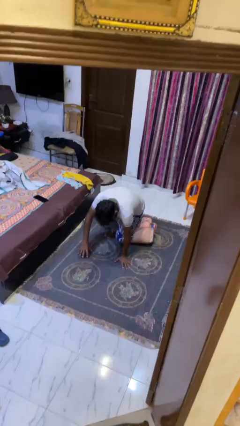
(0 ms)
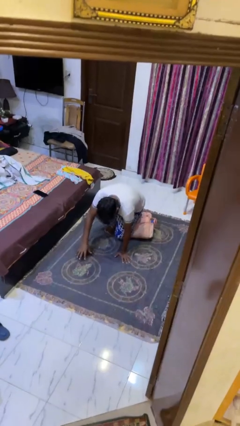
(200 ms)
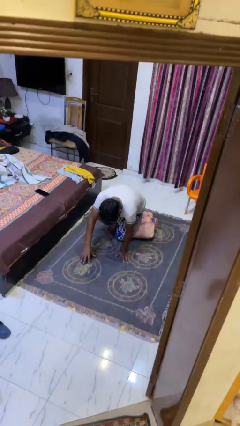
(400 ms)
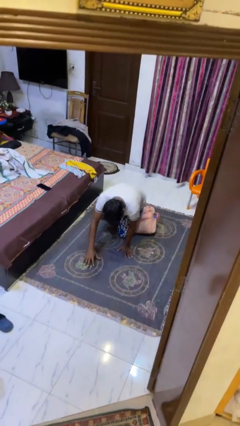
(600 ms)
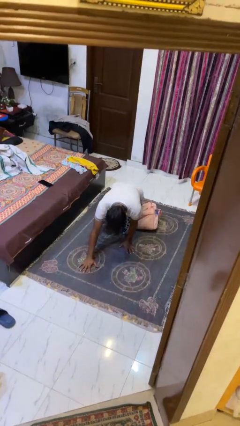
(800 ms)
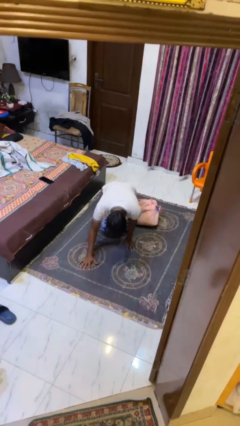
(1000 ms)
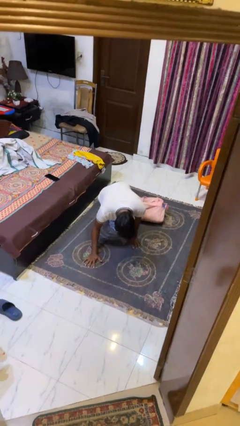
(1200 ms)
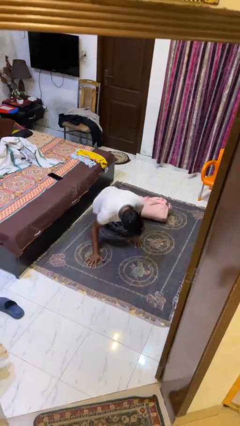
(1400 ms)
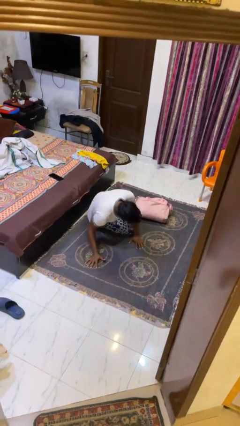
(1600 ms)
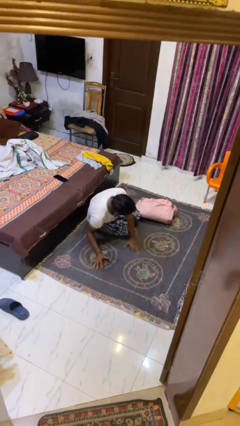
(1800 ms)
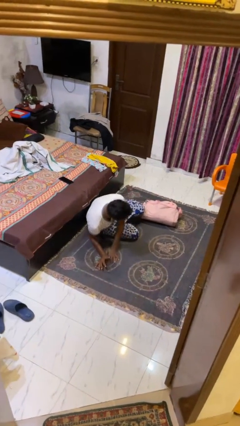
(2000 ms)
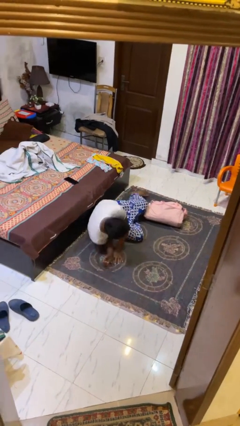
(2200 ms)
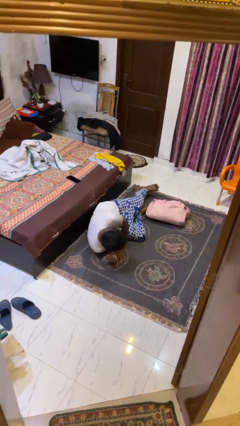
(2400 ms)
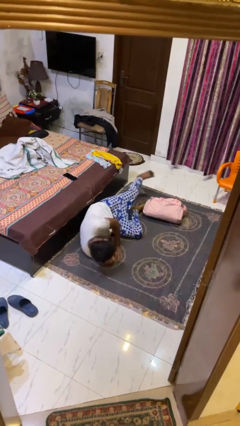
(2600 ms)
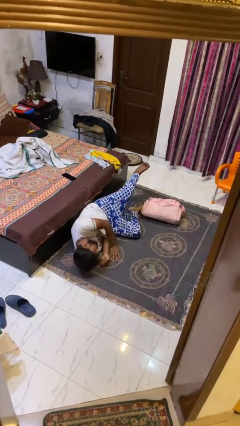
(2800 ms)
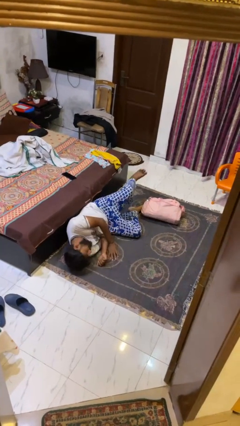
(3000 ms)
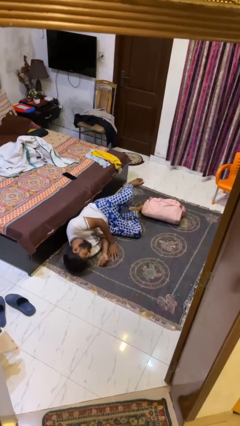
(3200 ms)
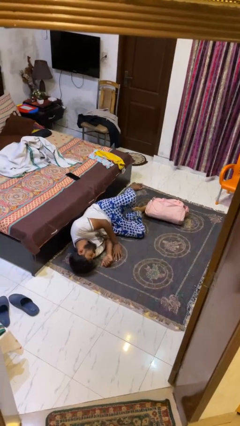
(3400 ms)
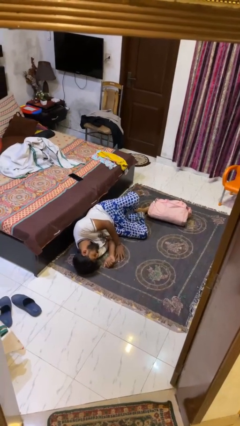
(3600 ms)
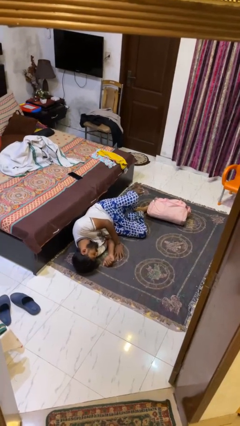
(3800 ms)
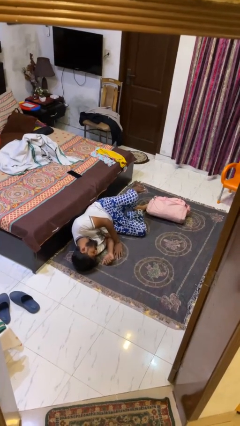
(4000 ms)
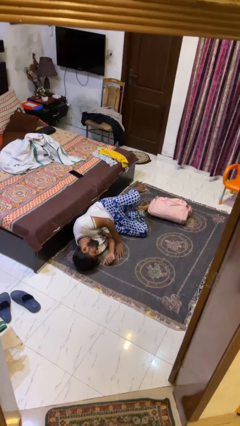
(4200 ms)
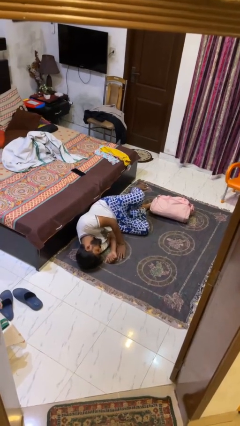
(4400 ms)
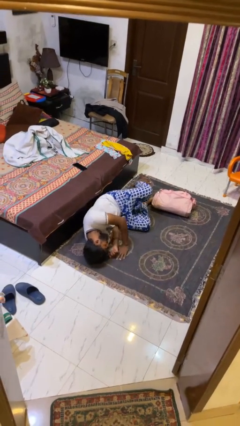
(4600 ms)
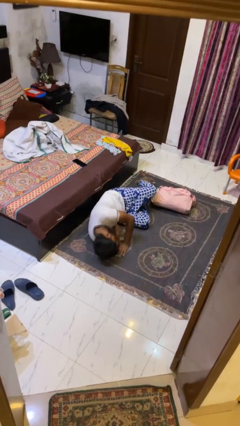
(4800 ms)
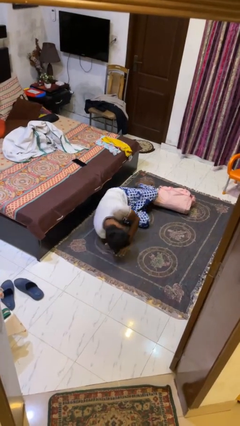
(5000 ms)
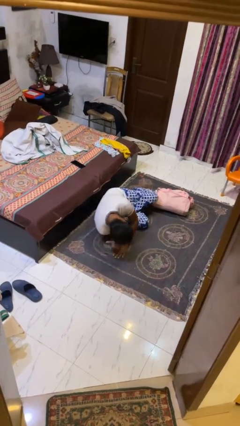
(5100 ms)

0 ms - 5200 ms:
person lies down on floor

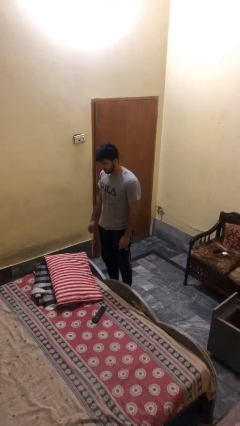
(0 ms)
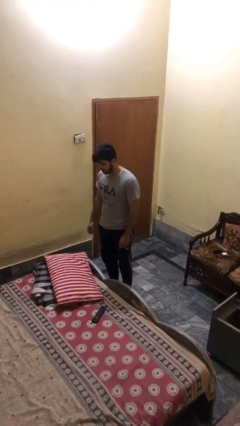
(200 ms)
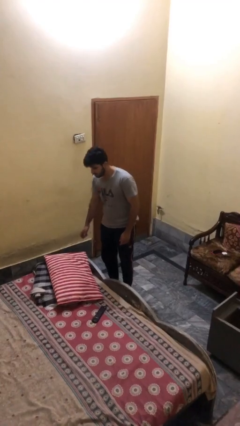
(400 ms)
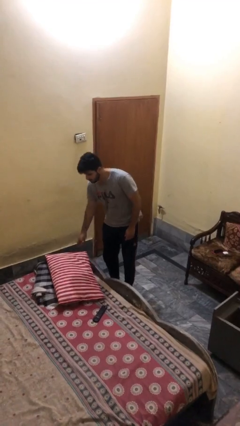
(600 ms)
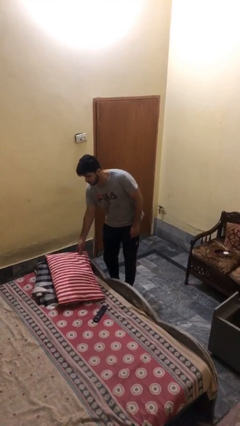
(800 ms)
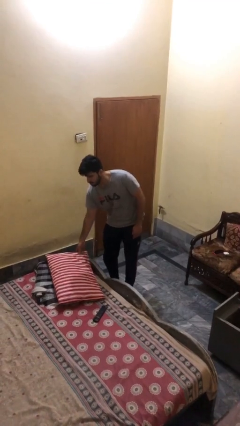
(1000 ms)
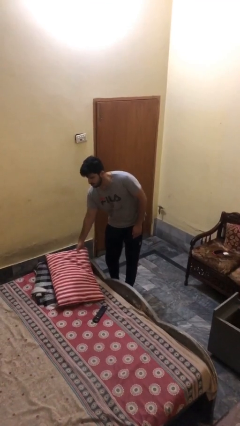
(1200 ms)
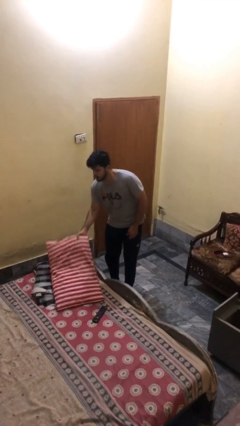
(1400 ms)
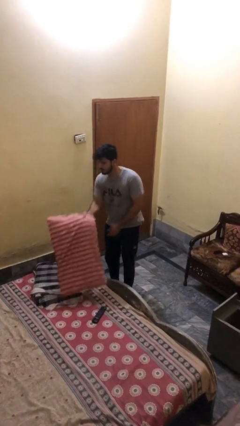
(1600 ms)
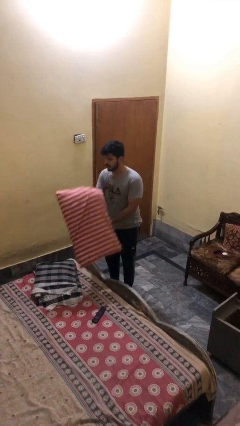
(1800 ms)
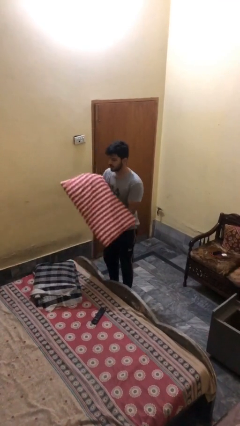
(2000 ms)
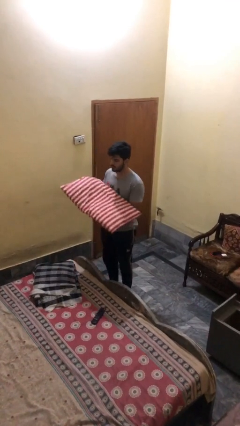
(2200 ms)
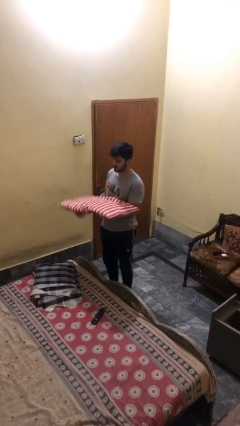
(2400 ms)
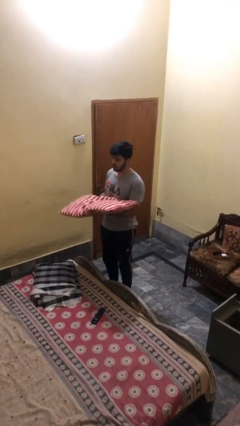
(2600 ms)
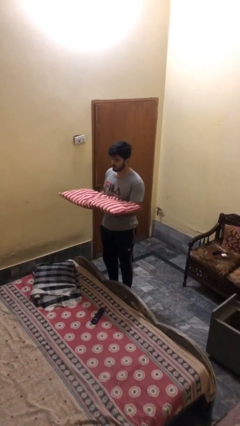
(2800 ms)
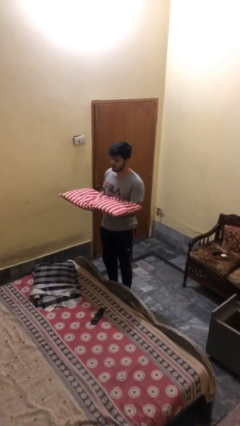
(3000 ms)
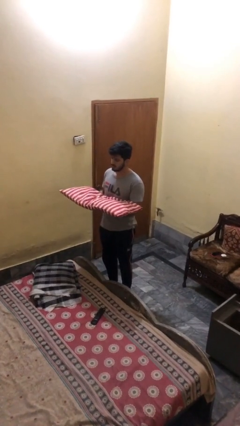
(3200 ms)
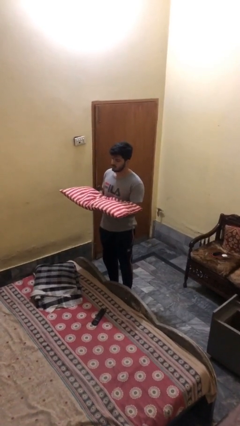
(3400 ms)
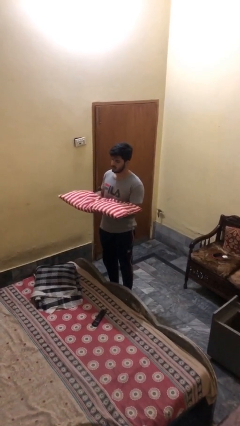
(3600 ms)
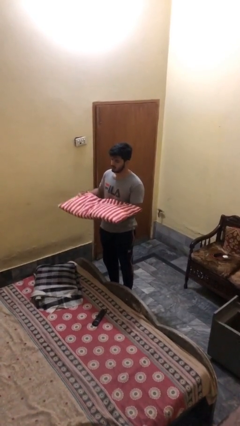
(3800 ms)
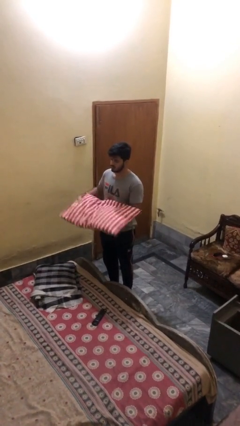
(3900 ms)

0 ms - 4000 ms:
person picks up object from bed

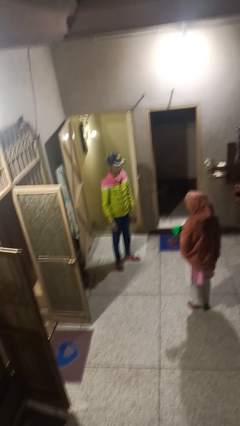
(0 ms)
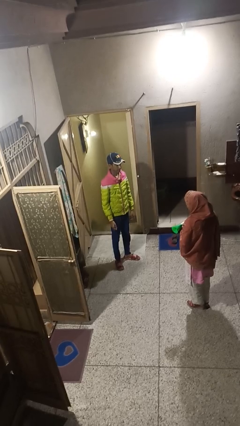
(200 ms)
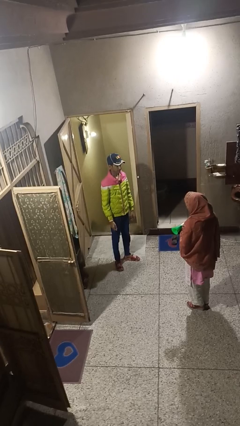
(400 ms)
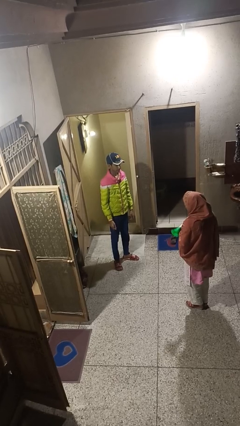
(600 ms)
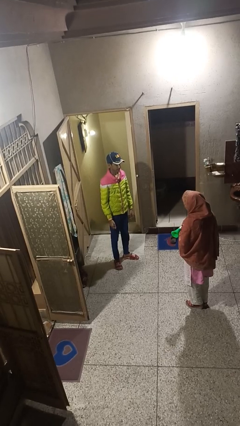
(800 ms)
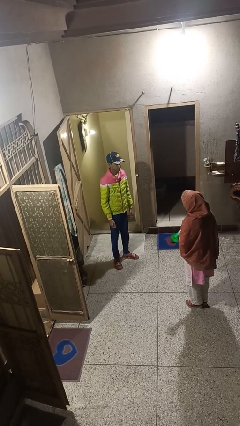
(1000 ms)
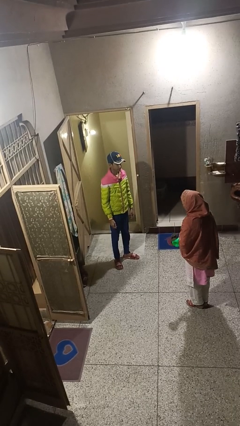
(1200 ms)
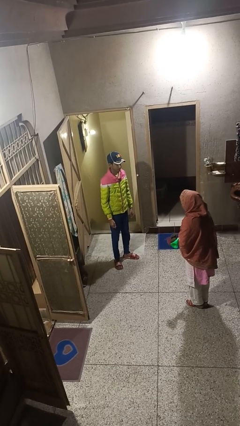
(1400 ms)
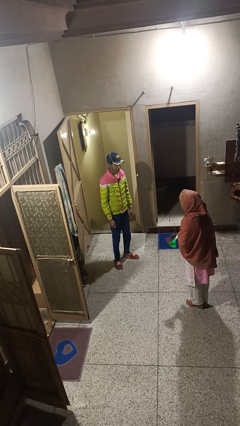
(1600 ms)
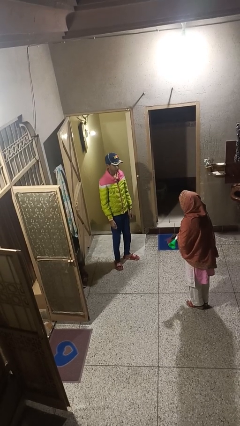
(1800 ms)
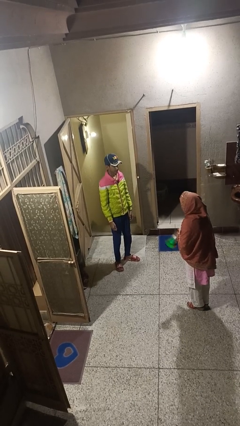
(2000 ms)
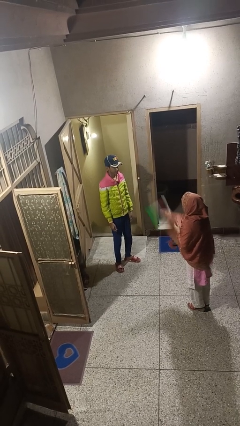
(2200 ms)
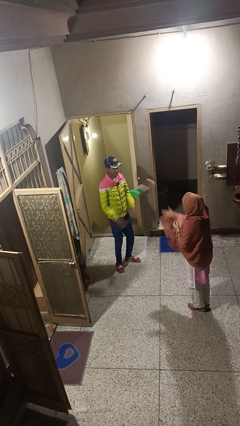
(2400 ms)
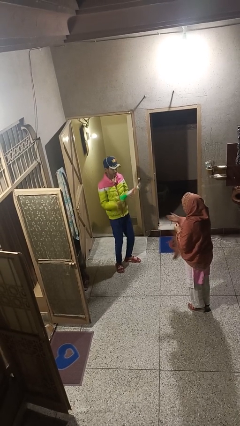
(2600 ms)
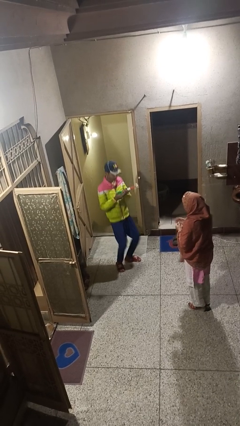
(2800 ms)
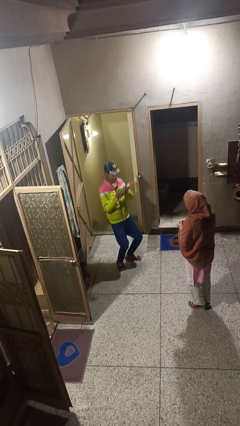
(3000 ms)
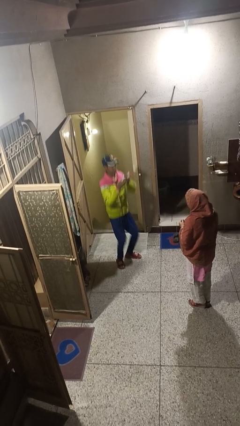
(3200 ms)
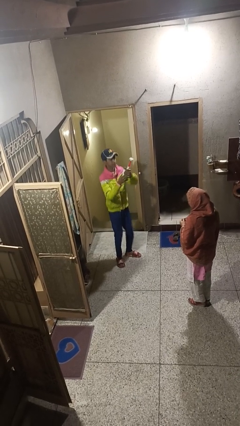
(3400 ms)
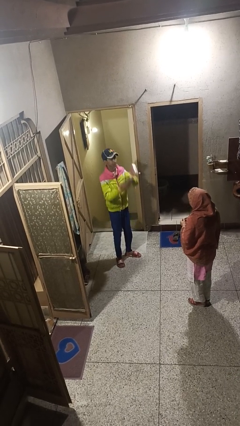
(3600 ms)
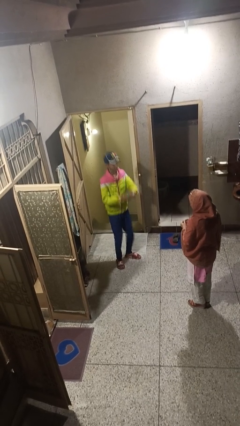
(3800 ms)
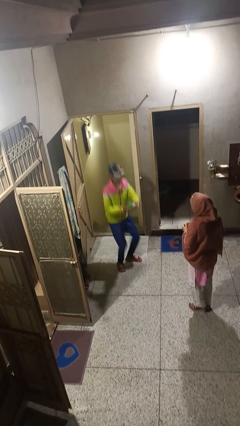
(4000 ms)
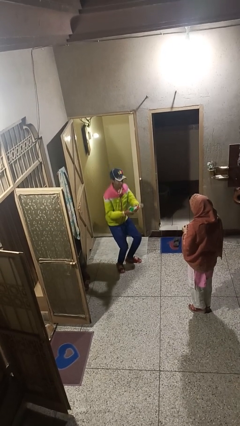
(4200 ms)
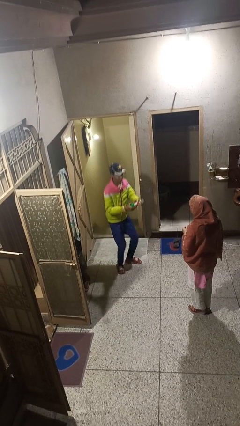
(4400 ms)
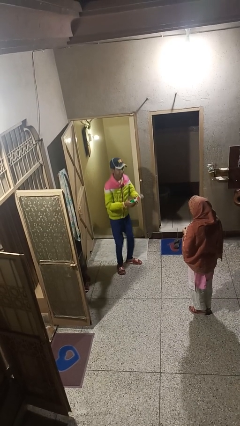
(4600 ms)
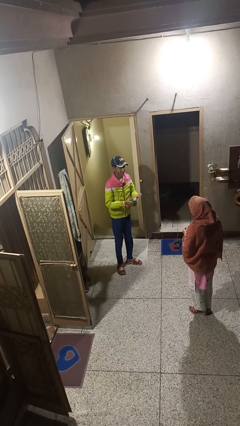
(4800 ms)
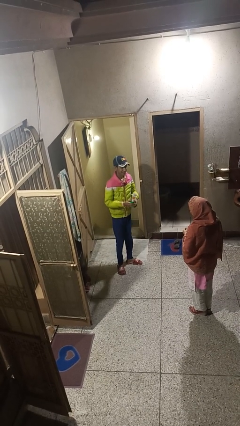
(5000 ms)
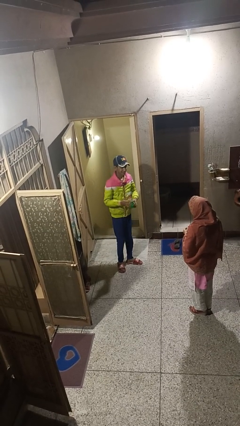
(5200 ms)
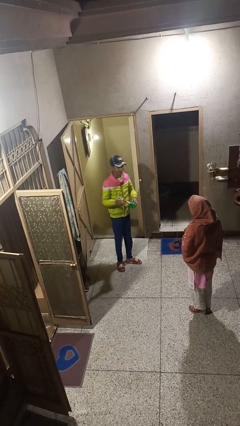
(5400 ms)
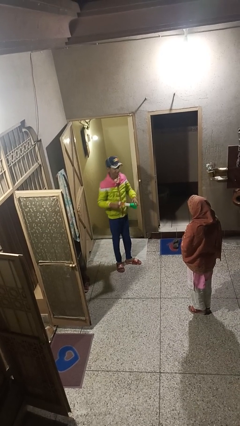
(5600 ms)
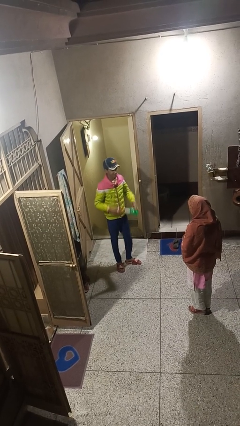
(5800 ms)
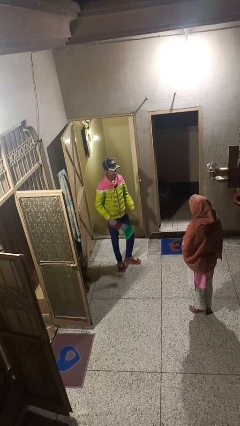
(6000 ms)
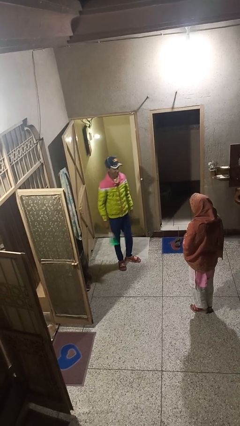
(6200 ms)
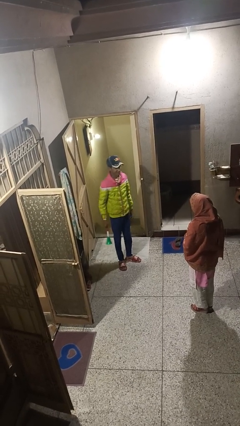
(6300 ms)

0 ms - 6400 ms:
person catches object from person

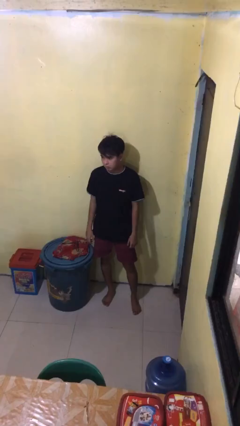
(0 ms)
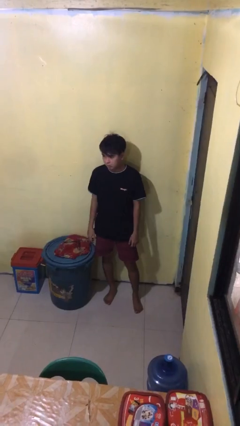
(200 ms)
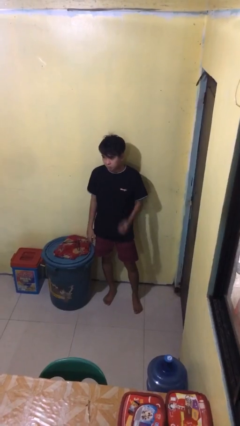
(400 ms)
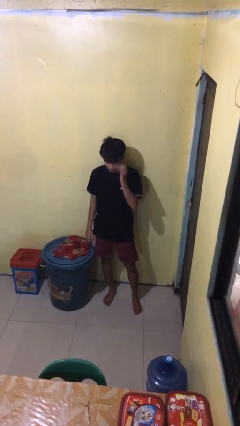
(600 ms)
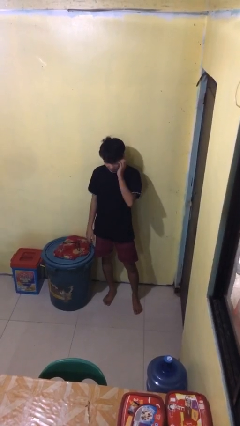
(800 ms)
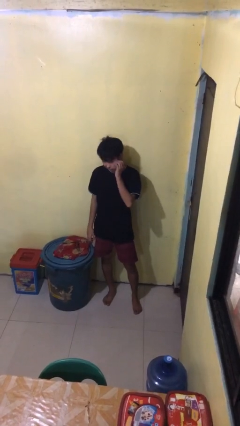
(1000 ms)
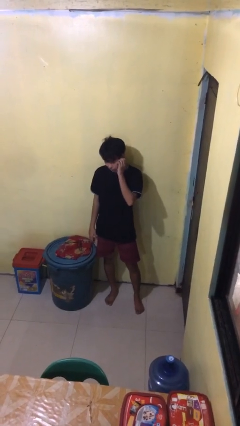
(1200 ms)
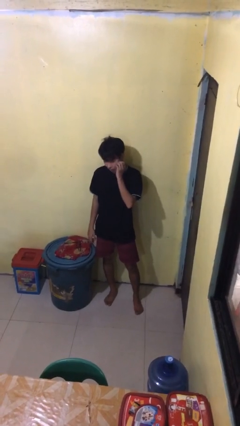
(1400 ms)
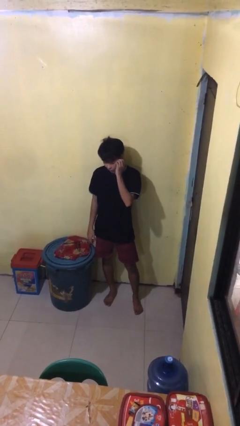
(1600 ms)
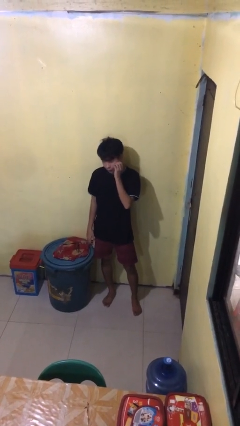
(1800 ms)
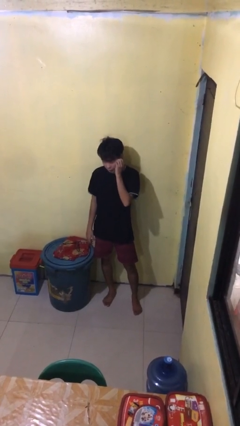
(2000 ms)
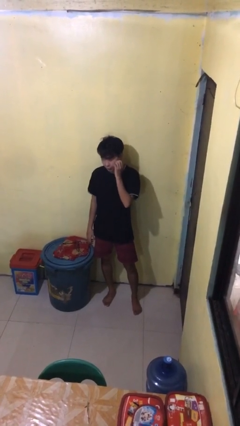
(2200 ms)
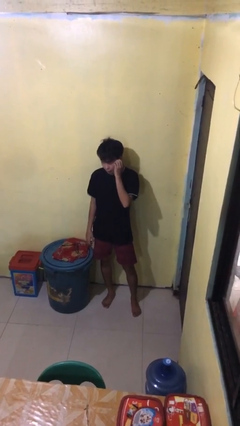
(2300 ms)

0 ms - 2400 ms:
person scratches face

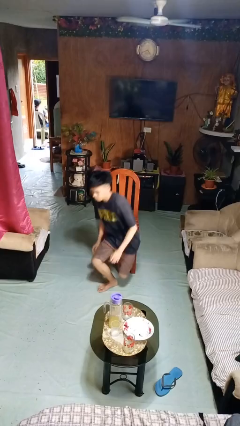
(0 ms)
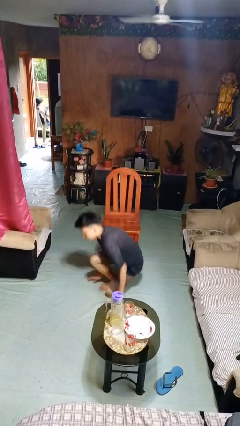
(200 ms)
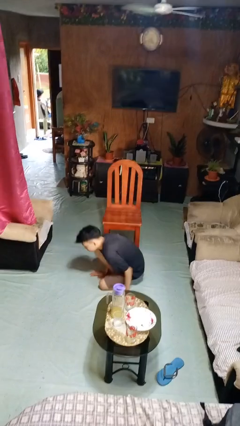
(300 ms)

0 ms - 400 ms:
person falls from chair
